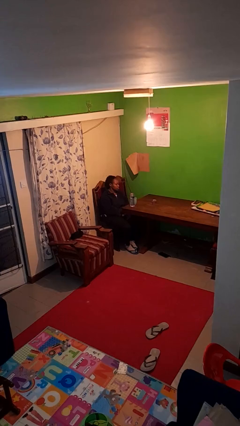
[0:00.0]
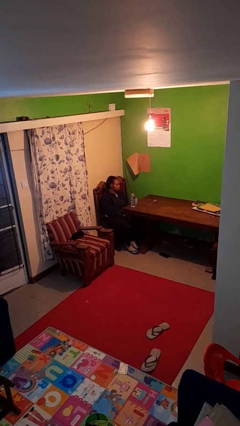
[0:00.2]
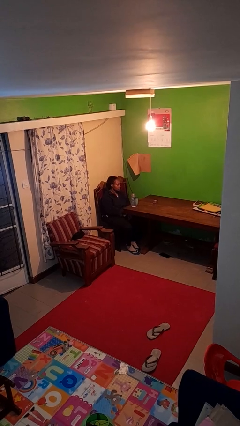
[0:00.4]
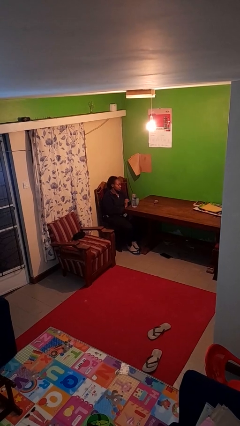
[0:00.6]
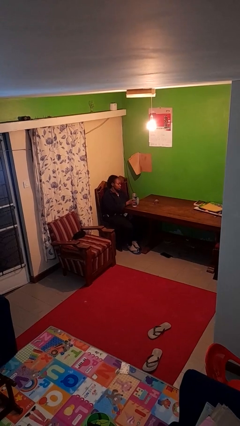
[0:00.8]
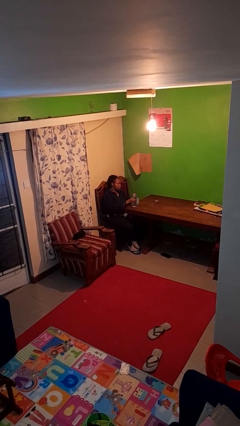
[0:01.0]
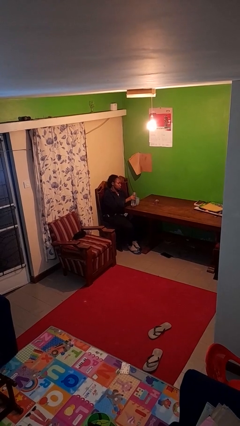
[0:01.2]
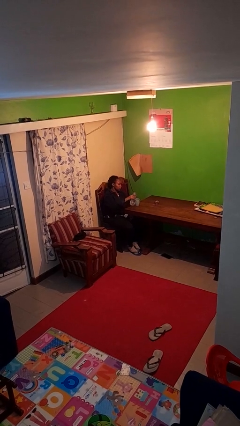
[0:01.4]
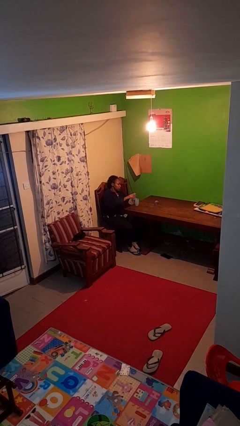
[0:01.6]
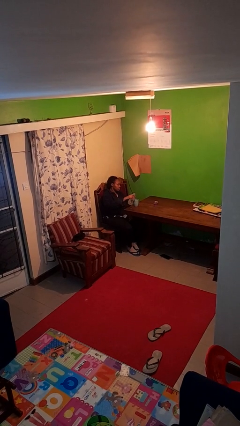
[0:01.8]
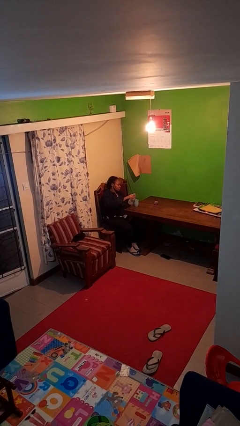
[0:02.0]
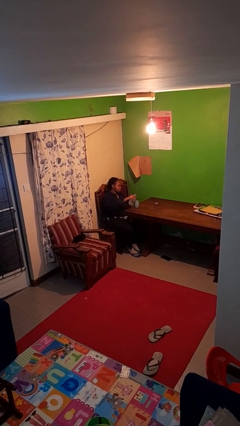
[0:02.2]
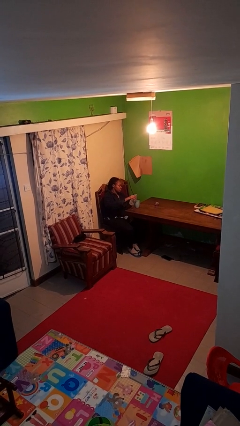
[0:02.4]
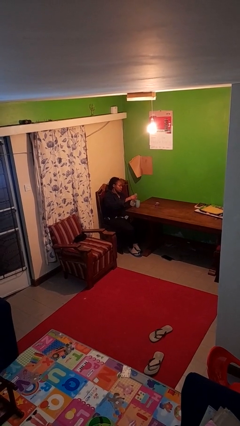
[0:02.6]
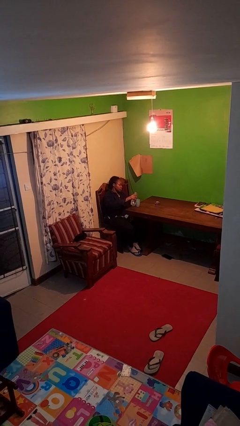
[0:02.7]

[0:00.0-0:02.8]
person pours liquid into cup

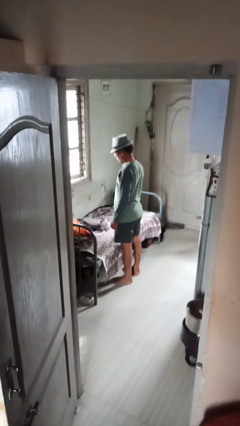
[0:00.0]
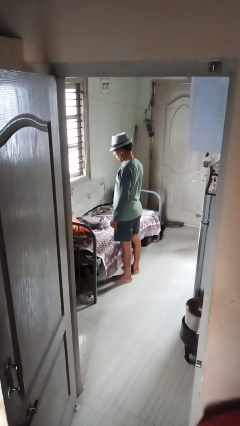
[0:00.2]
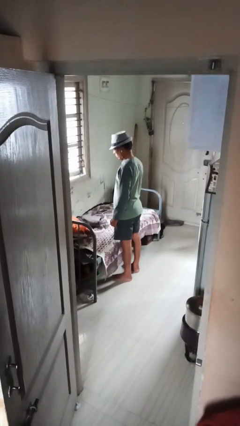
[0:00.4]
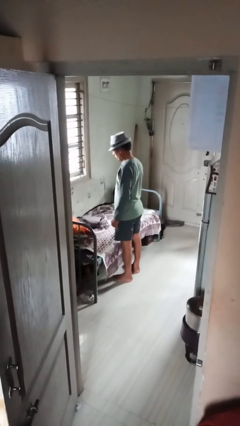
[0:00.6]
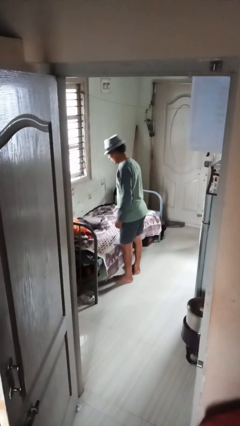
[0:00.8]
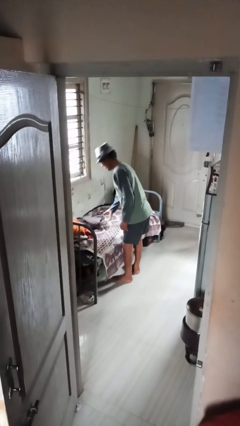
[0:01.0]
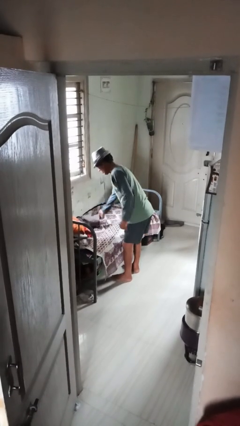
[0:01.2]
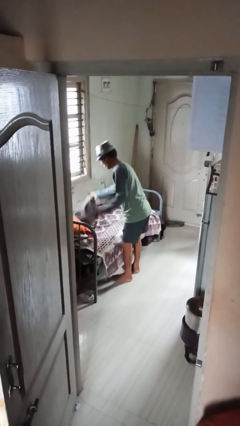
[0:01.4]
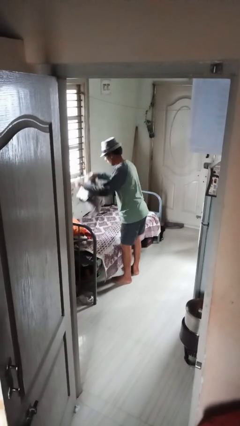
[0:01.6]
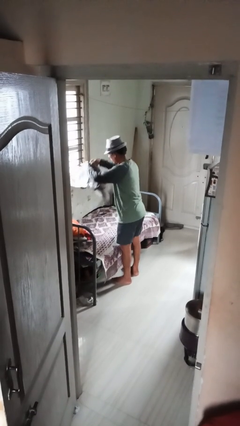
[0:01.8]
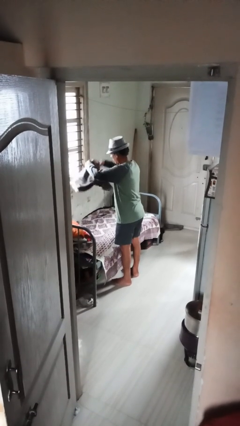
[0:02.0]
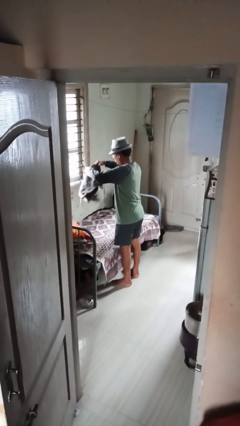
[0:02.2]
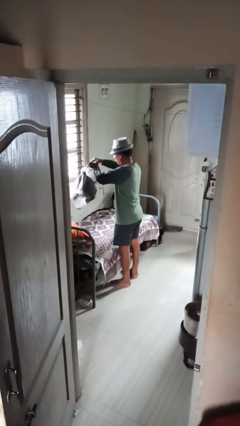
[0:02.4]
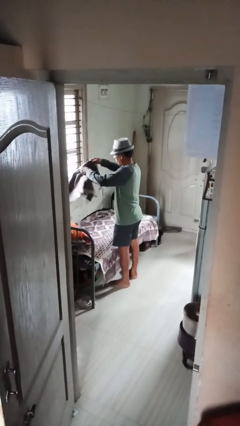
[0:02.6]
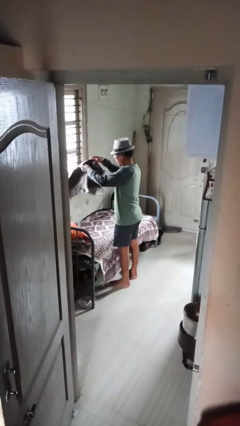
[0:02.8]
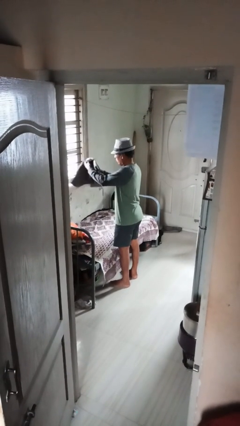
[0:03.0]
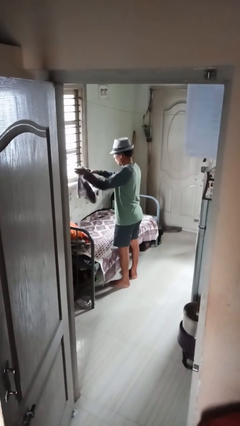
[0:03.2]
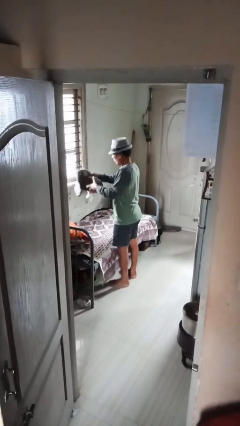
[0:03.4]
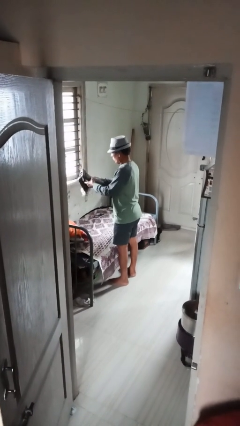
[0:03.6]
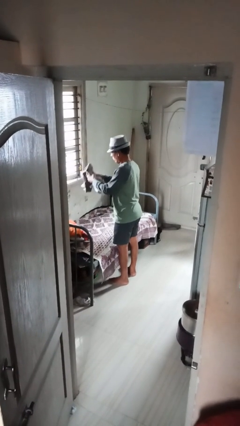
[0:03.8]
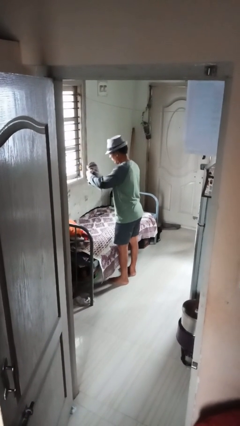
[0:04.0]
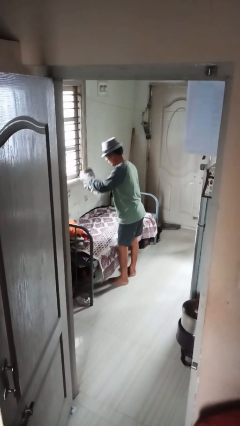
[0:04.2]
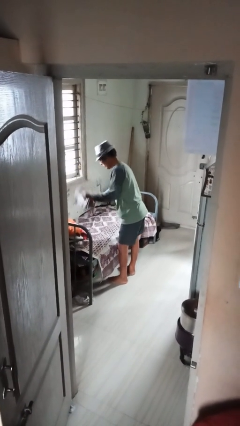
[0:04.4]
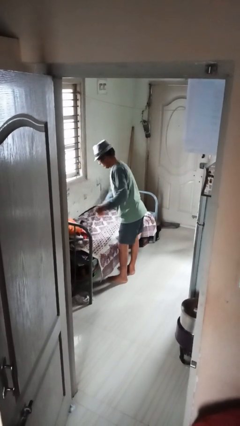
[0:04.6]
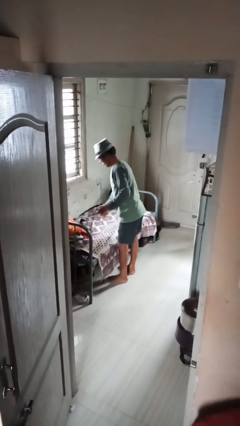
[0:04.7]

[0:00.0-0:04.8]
person folds pants

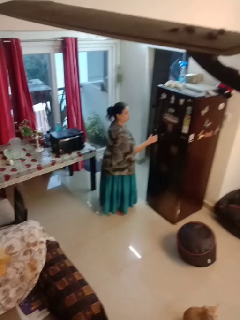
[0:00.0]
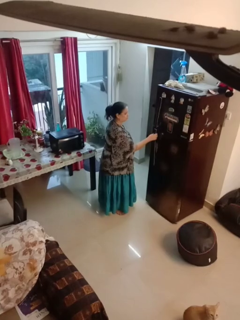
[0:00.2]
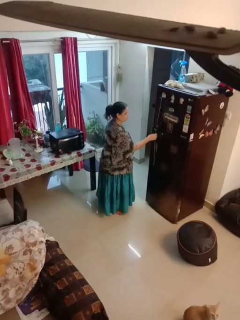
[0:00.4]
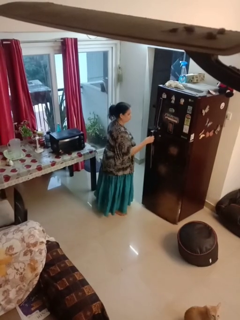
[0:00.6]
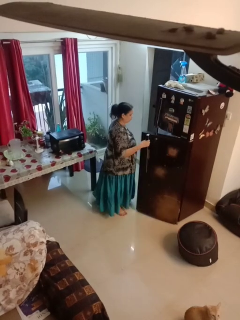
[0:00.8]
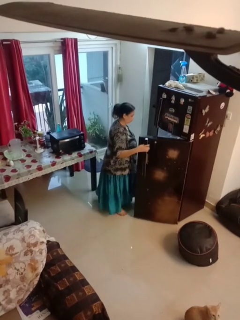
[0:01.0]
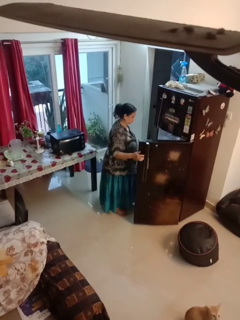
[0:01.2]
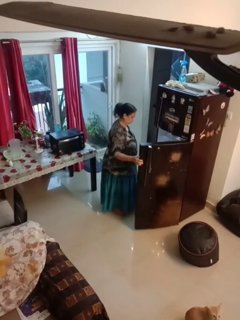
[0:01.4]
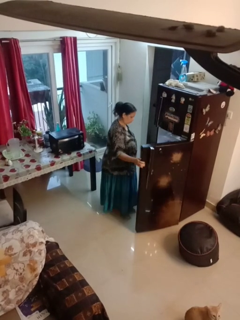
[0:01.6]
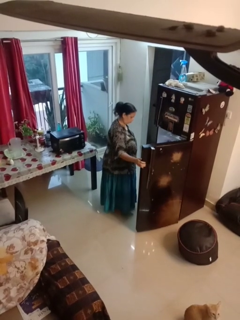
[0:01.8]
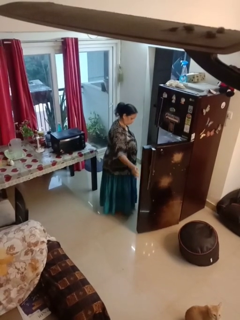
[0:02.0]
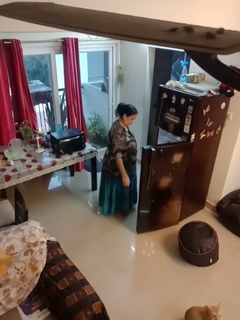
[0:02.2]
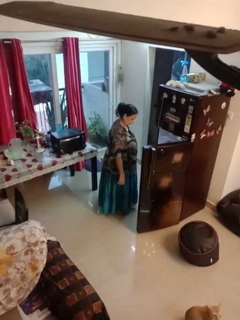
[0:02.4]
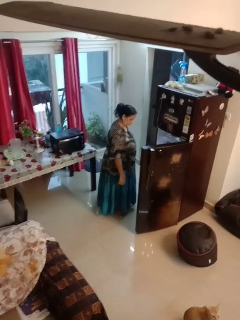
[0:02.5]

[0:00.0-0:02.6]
person opens refrigerator

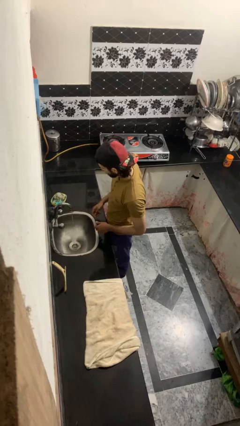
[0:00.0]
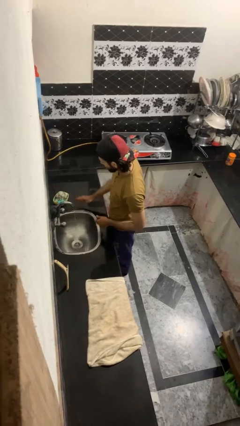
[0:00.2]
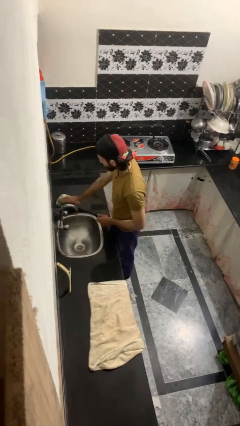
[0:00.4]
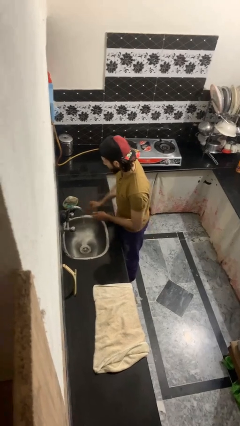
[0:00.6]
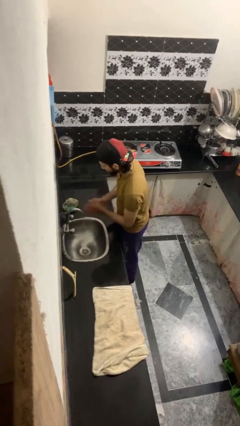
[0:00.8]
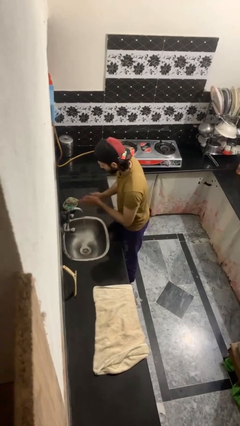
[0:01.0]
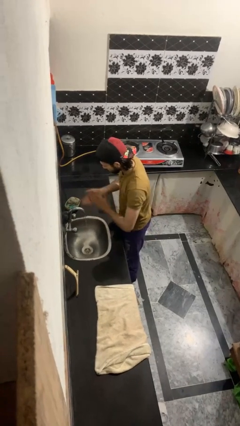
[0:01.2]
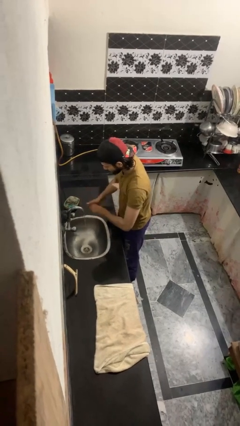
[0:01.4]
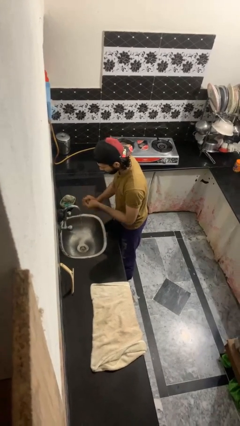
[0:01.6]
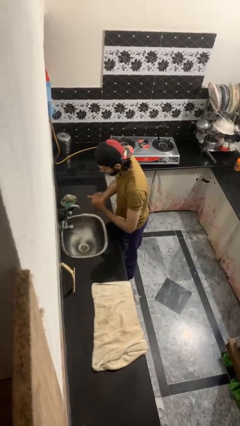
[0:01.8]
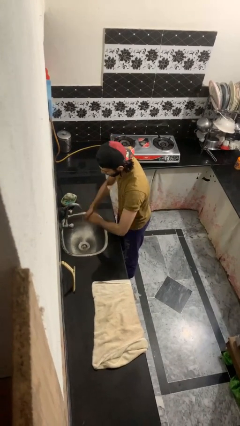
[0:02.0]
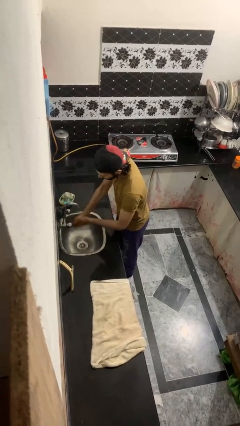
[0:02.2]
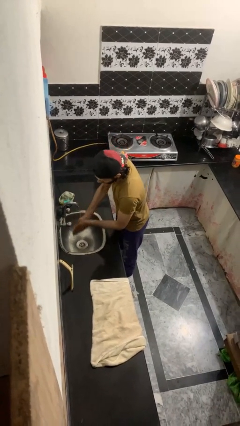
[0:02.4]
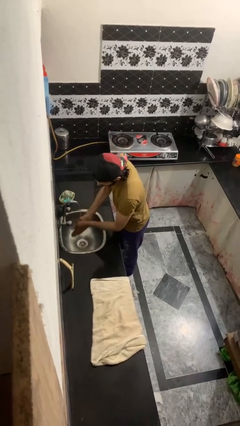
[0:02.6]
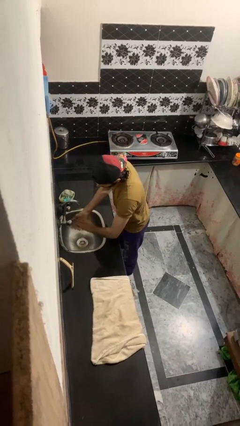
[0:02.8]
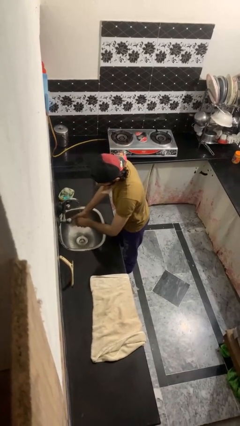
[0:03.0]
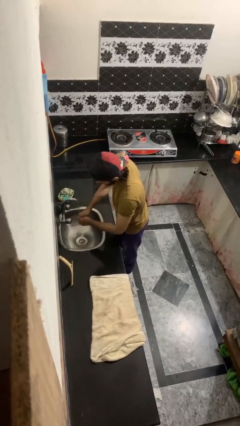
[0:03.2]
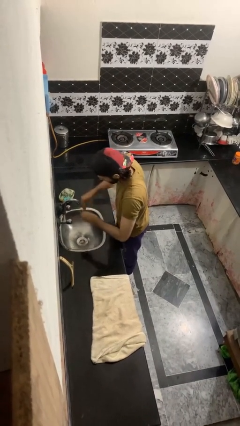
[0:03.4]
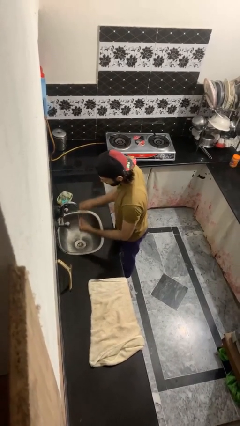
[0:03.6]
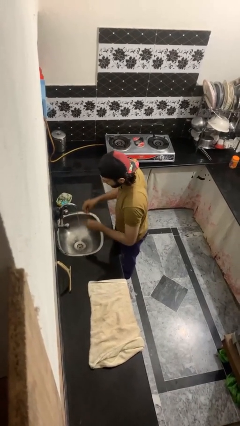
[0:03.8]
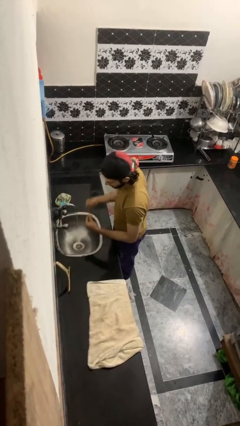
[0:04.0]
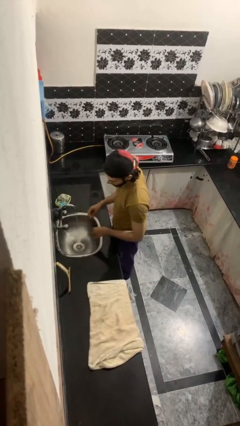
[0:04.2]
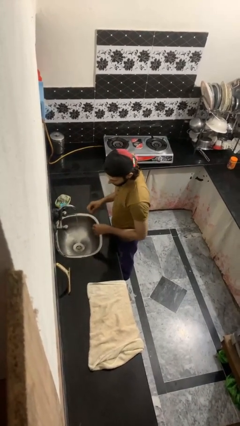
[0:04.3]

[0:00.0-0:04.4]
person washes hands

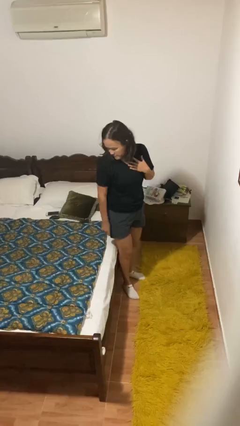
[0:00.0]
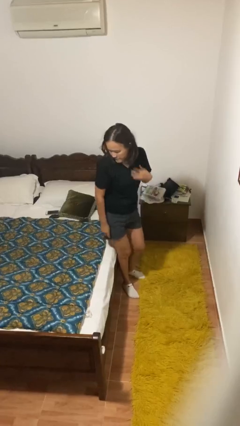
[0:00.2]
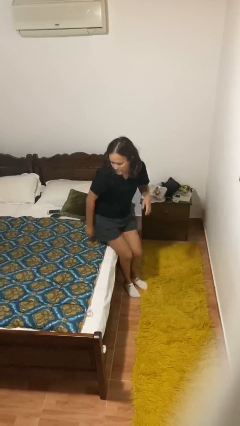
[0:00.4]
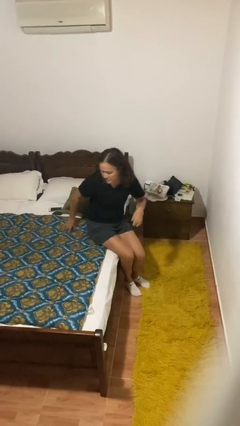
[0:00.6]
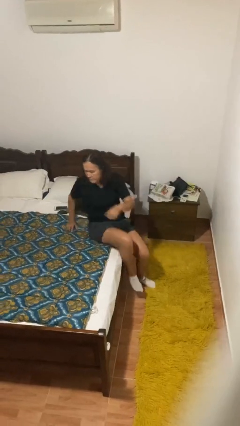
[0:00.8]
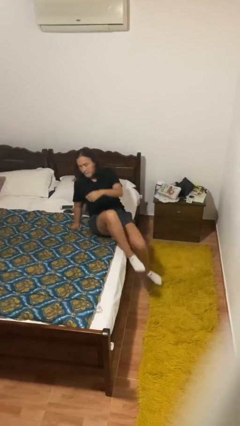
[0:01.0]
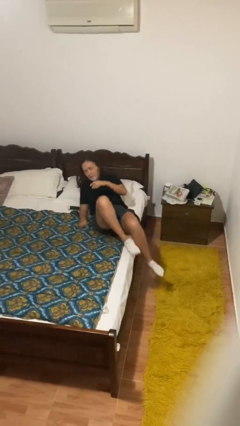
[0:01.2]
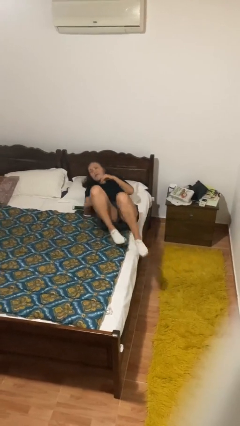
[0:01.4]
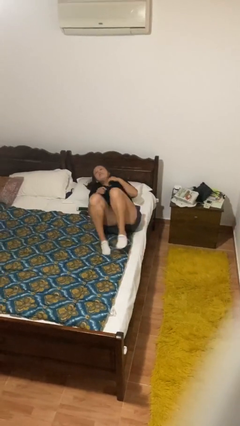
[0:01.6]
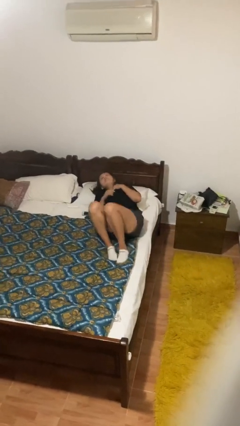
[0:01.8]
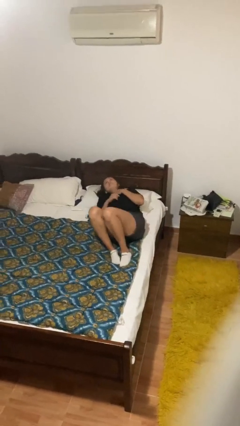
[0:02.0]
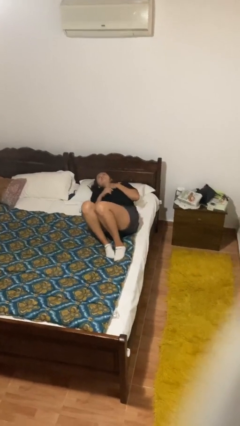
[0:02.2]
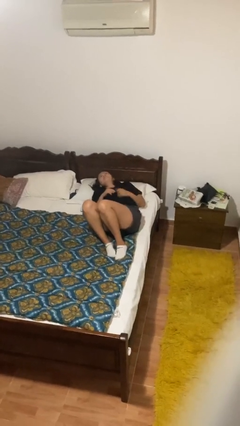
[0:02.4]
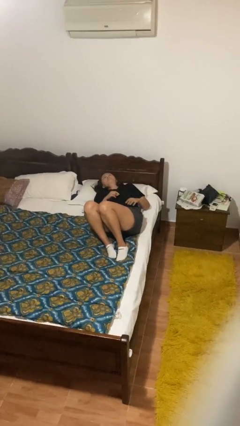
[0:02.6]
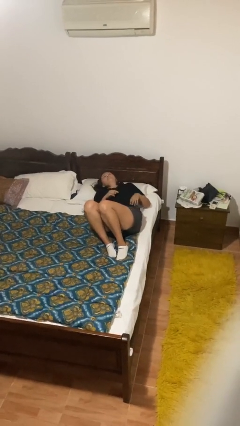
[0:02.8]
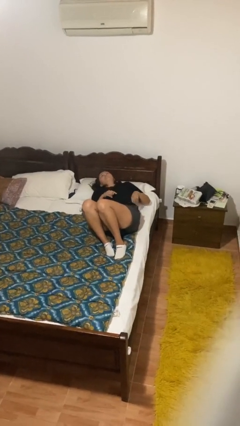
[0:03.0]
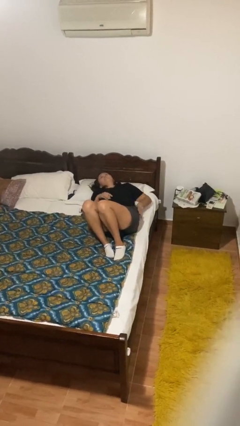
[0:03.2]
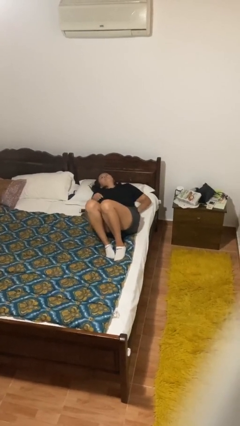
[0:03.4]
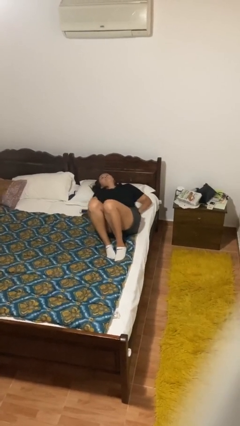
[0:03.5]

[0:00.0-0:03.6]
person lies down on bed

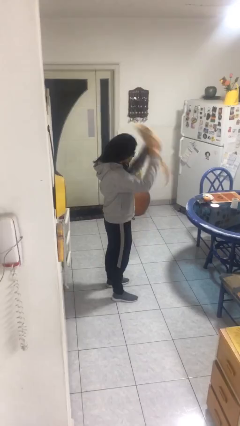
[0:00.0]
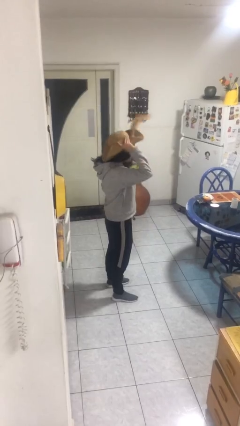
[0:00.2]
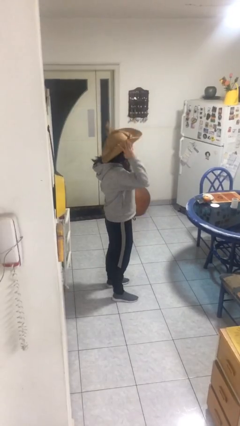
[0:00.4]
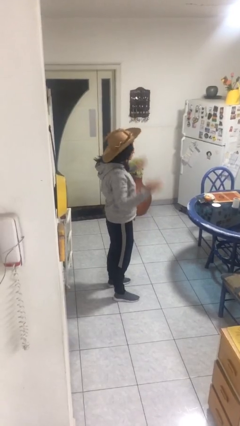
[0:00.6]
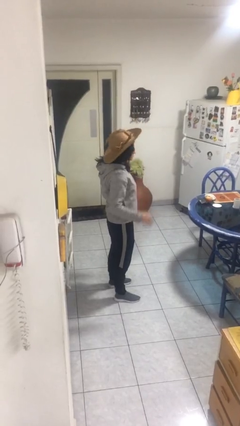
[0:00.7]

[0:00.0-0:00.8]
person puts on hat
